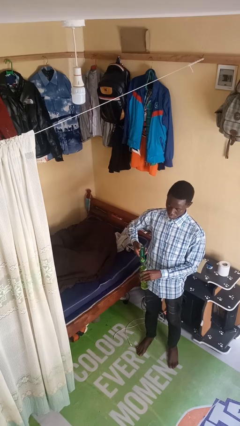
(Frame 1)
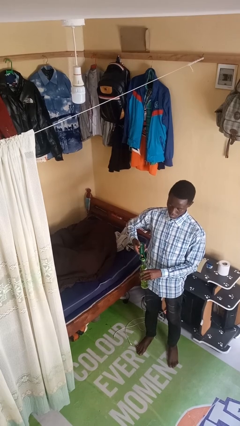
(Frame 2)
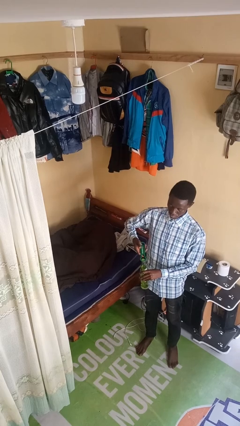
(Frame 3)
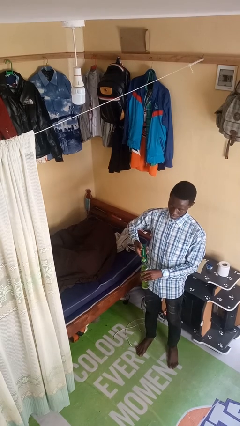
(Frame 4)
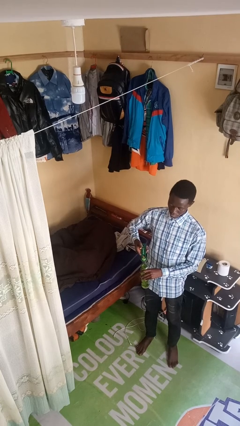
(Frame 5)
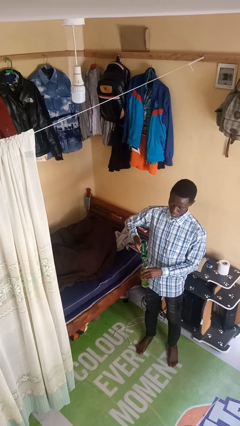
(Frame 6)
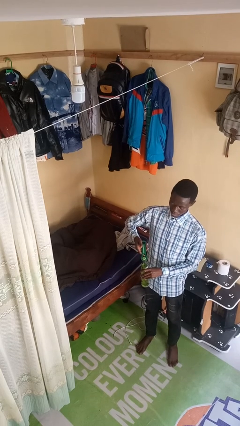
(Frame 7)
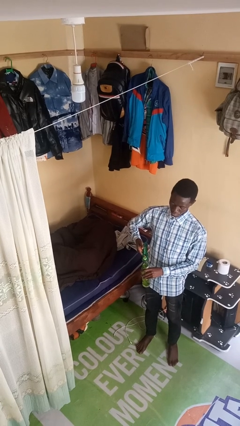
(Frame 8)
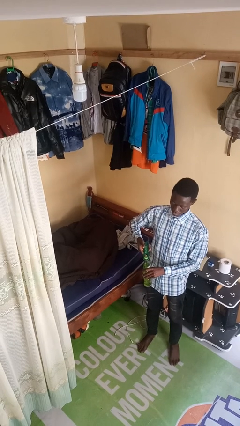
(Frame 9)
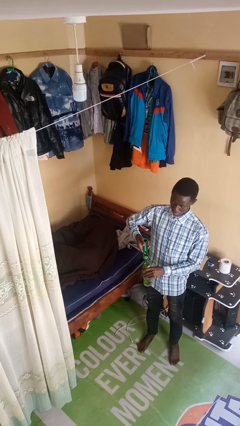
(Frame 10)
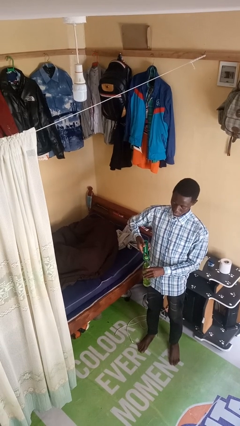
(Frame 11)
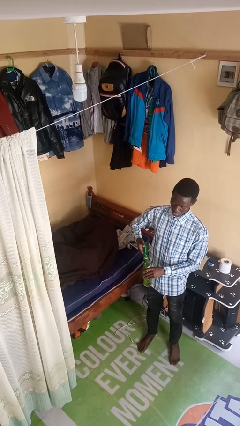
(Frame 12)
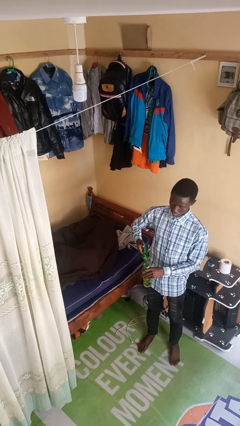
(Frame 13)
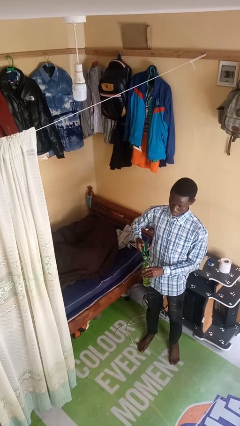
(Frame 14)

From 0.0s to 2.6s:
person opens can with can opener

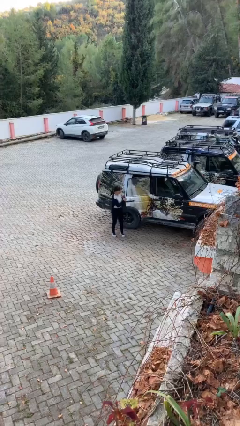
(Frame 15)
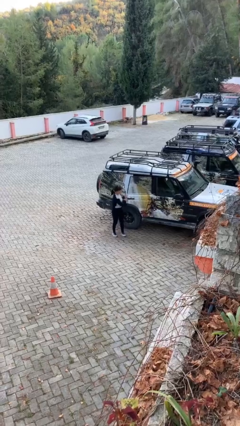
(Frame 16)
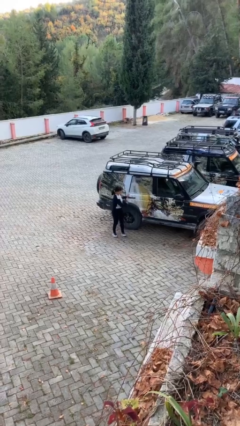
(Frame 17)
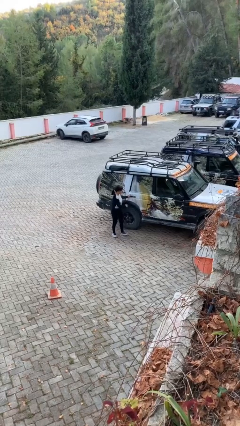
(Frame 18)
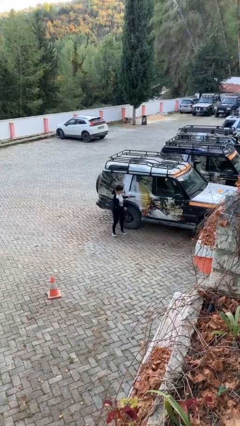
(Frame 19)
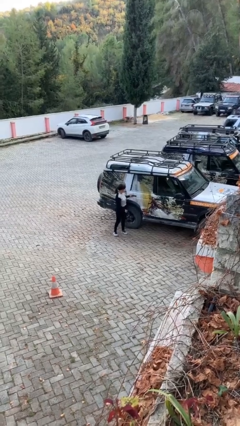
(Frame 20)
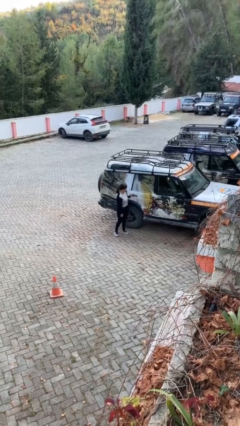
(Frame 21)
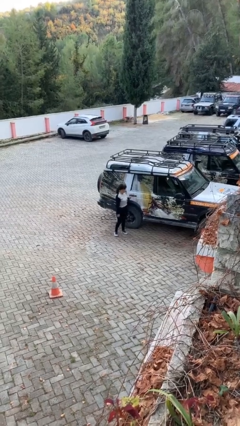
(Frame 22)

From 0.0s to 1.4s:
person closes car door

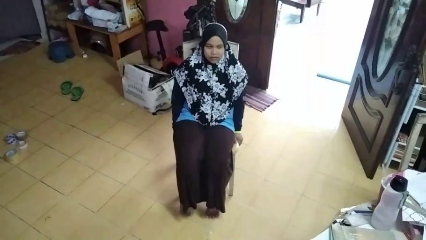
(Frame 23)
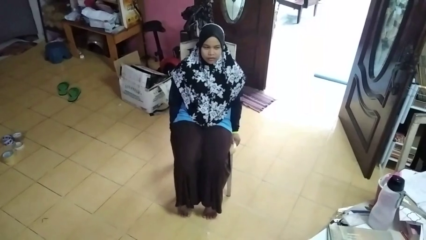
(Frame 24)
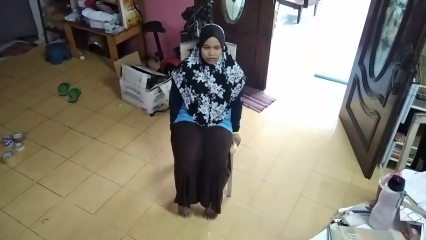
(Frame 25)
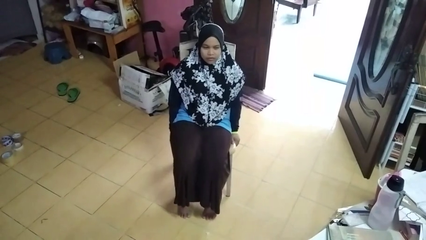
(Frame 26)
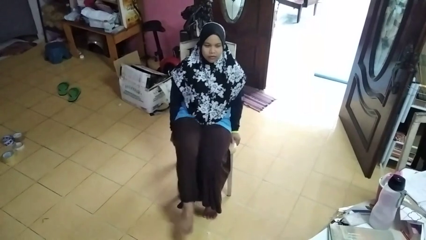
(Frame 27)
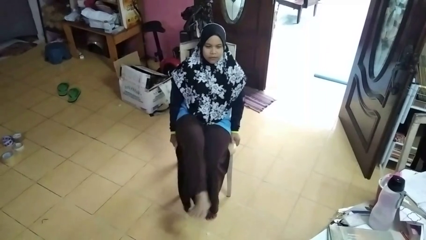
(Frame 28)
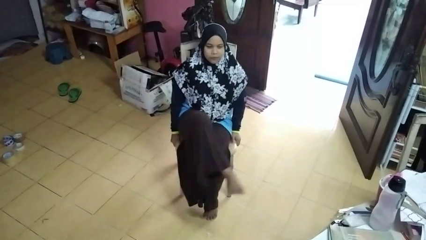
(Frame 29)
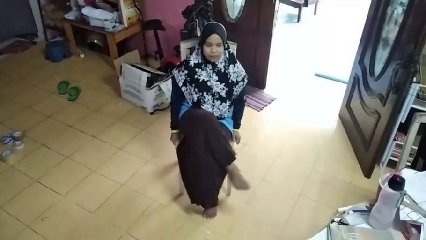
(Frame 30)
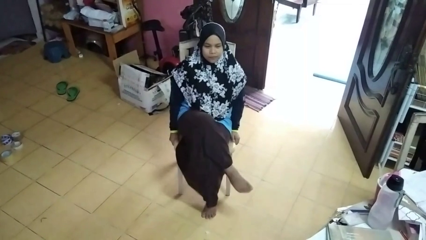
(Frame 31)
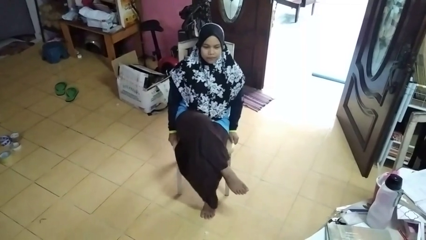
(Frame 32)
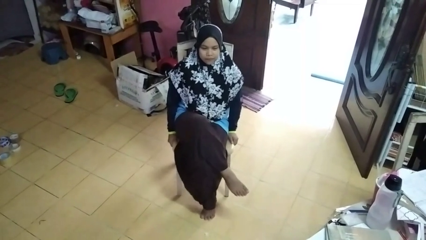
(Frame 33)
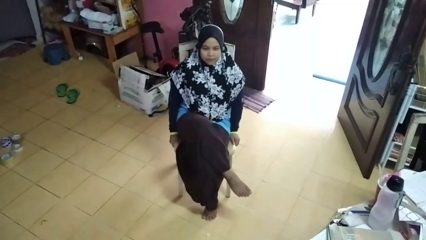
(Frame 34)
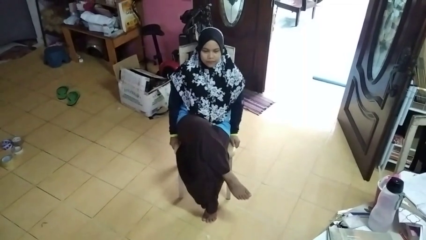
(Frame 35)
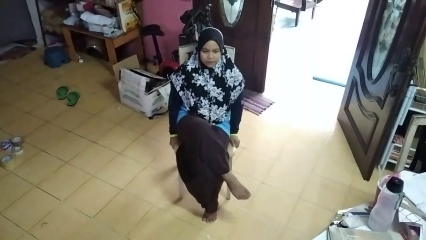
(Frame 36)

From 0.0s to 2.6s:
person crosses legs

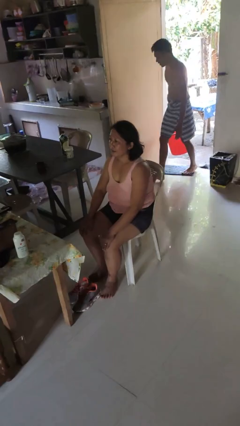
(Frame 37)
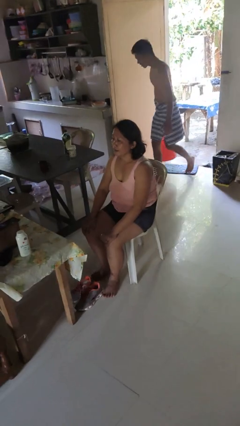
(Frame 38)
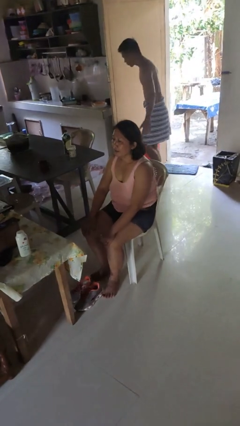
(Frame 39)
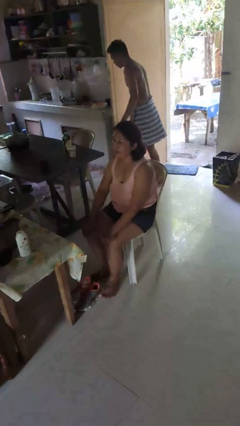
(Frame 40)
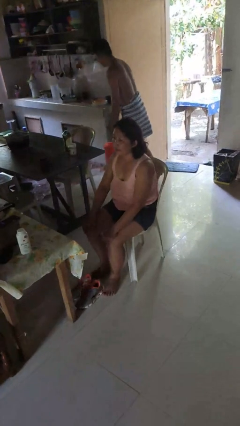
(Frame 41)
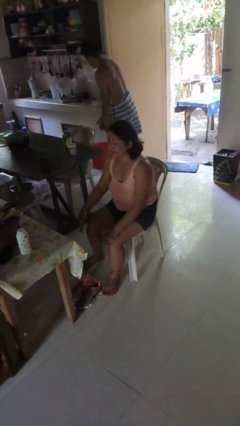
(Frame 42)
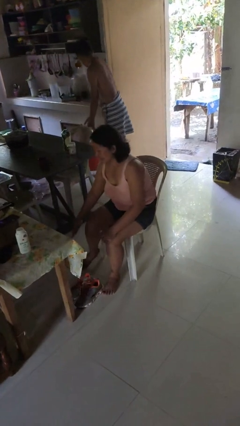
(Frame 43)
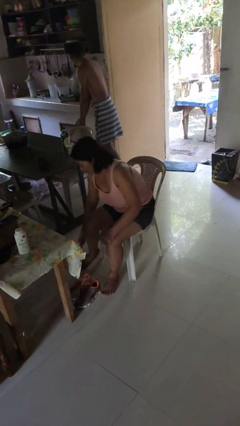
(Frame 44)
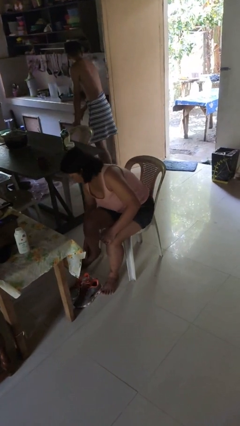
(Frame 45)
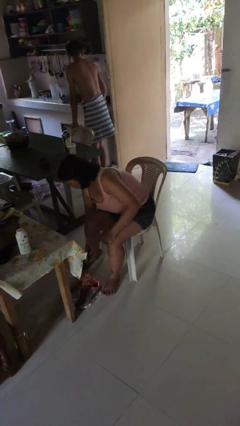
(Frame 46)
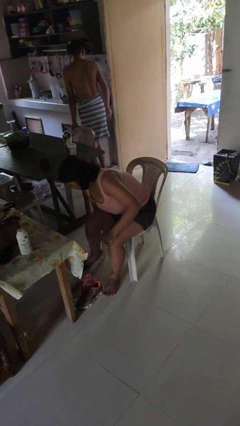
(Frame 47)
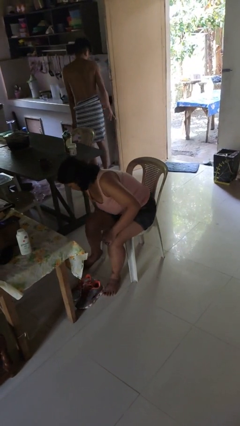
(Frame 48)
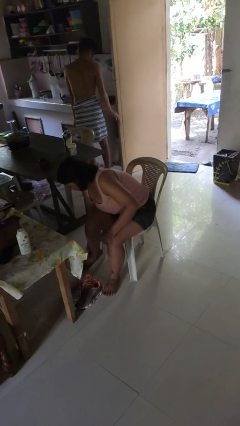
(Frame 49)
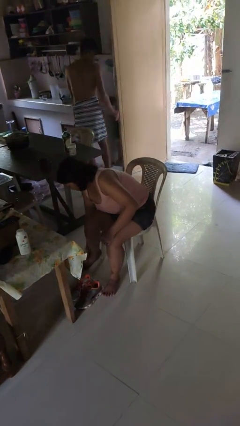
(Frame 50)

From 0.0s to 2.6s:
person rubs foot

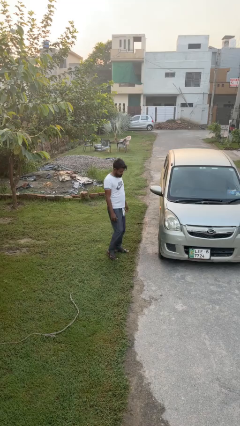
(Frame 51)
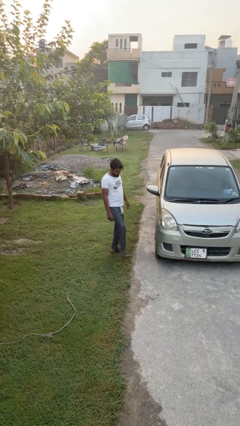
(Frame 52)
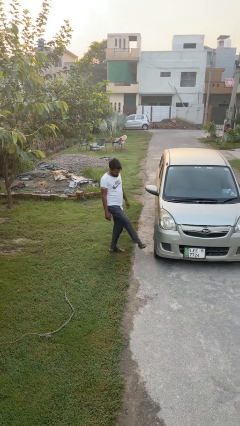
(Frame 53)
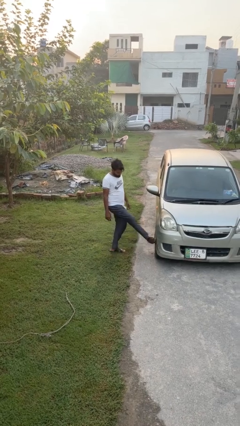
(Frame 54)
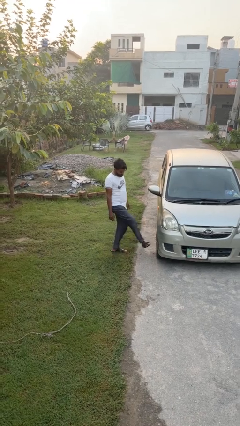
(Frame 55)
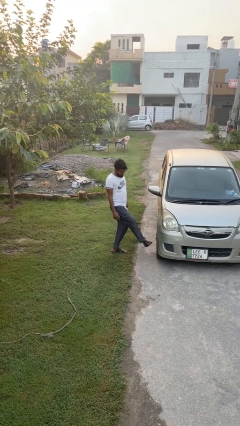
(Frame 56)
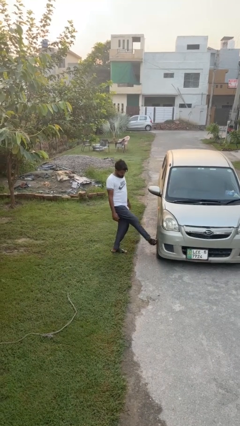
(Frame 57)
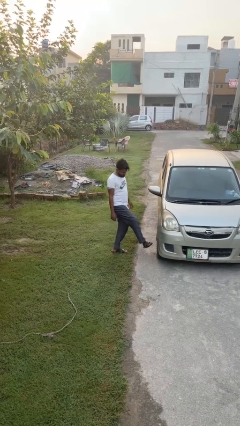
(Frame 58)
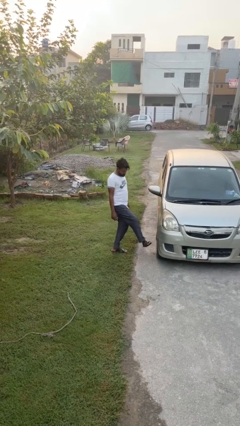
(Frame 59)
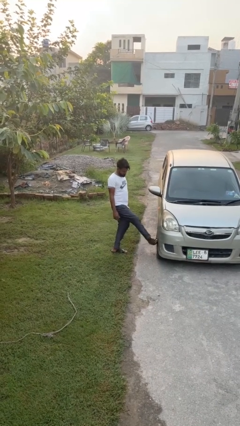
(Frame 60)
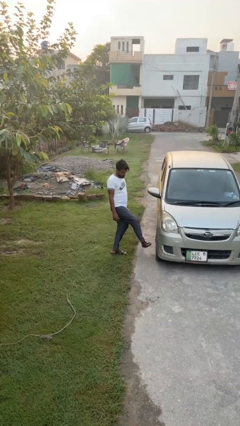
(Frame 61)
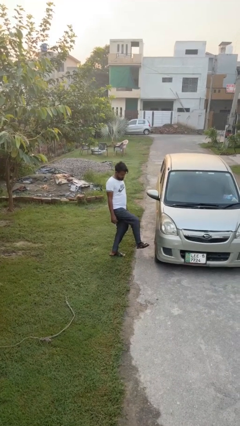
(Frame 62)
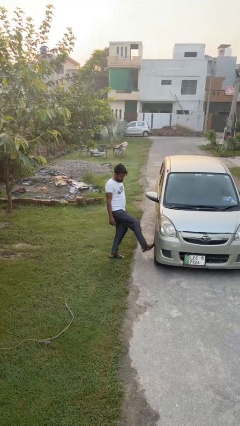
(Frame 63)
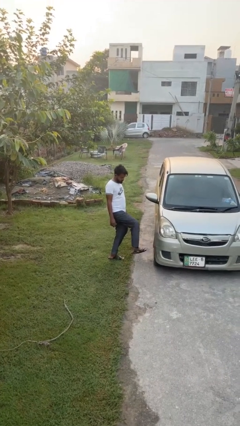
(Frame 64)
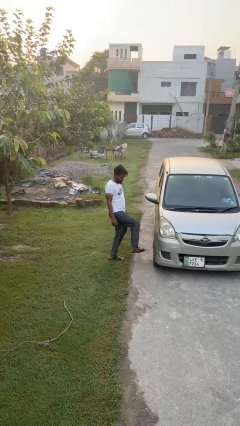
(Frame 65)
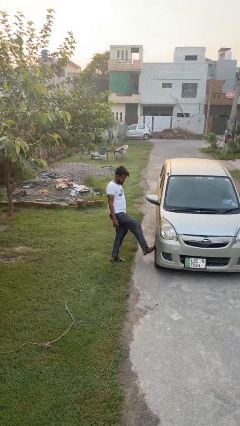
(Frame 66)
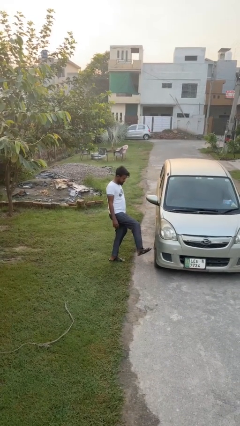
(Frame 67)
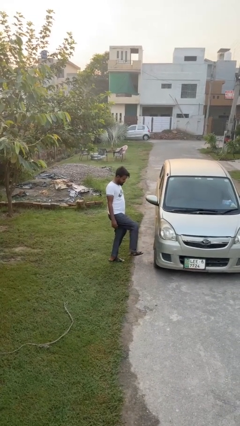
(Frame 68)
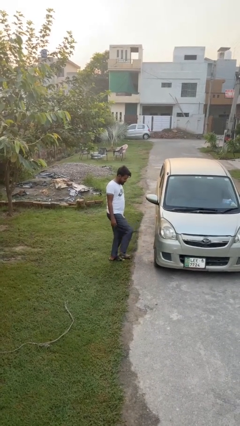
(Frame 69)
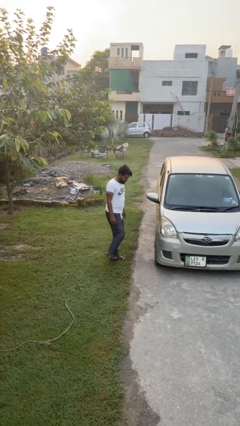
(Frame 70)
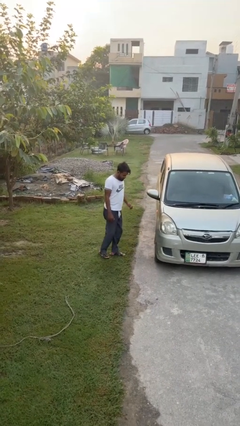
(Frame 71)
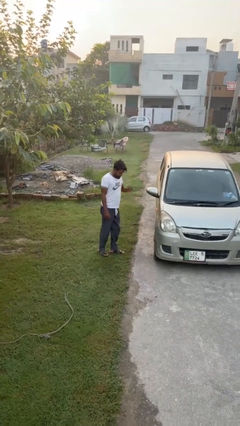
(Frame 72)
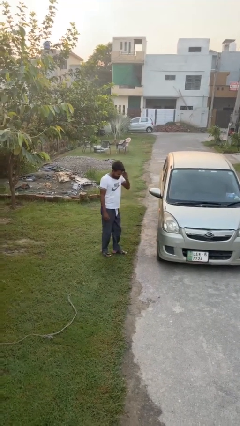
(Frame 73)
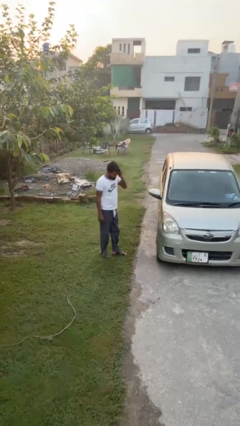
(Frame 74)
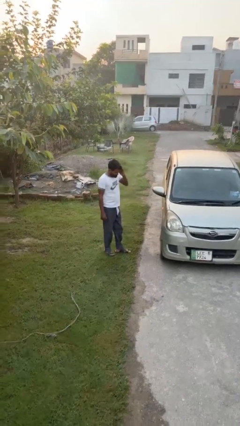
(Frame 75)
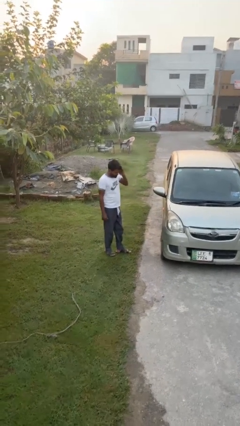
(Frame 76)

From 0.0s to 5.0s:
person kicks car tires

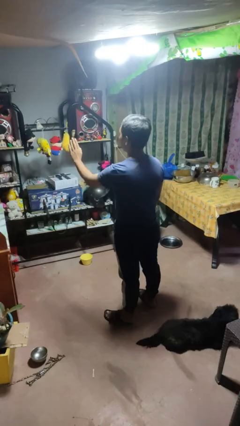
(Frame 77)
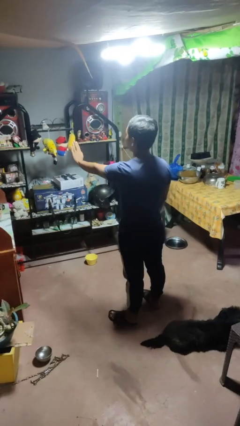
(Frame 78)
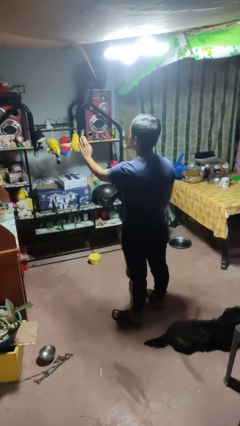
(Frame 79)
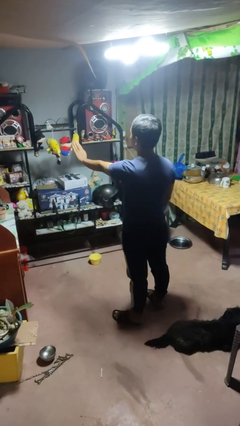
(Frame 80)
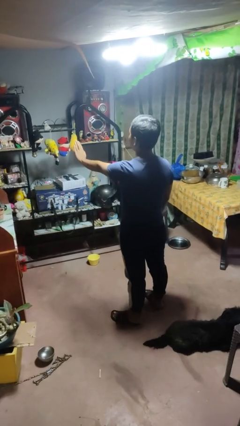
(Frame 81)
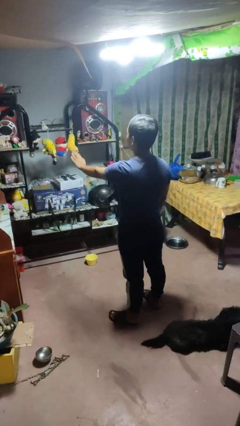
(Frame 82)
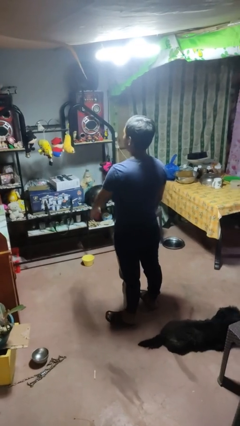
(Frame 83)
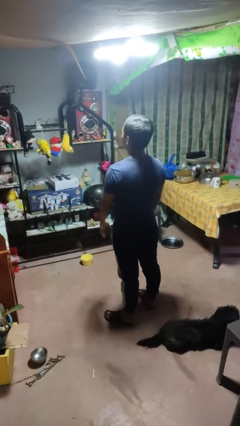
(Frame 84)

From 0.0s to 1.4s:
person gestures stop

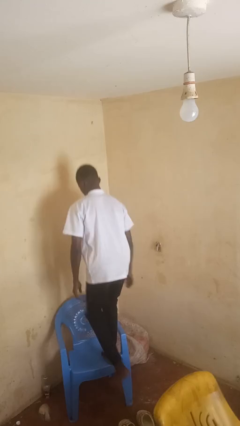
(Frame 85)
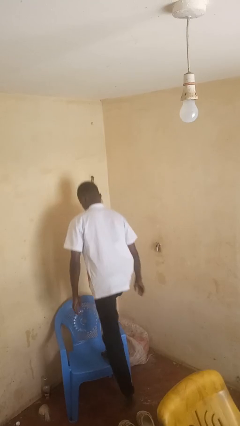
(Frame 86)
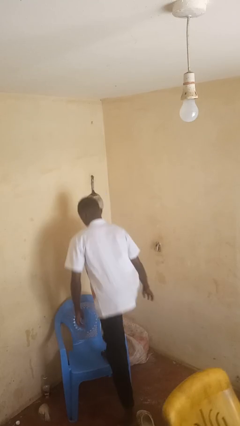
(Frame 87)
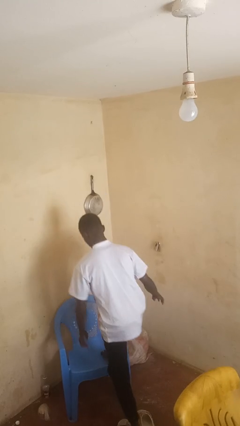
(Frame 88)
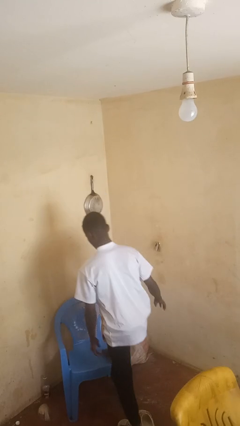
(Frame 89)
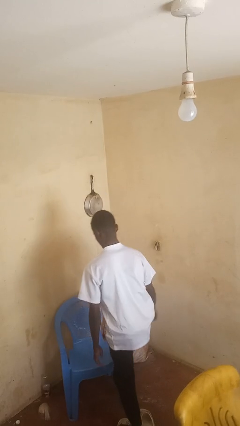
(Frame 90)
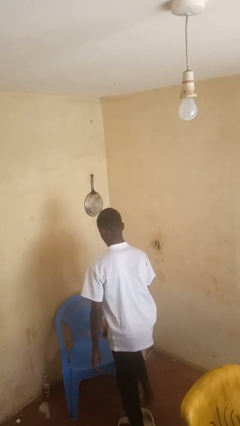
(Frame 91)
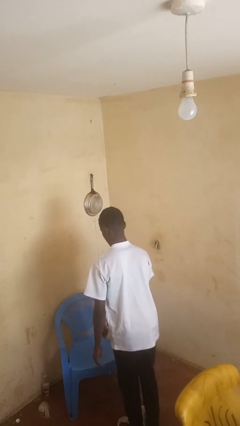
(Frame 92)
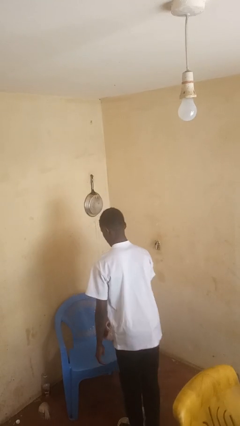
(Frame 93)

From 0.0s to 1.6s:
person climbs off chair
